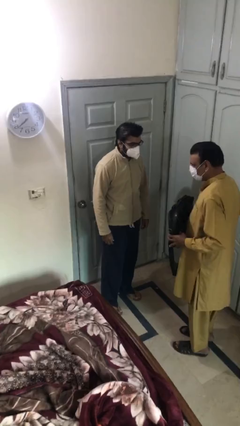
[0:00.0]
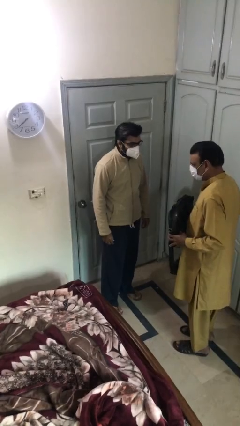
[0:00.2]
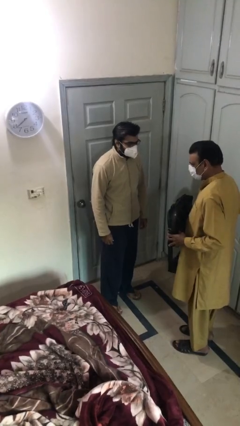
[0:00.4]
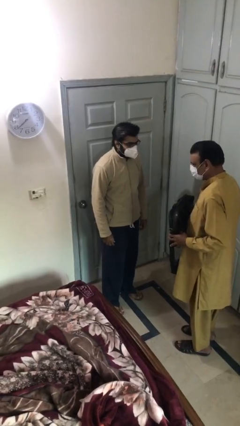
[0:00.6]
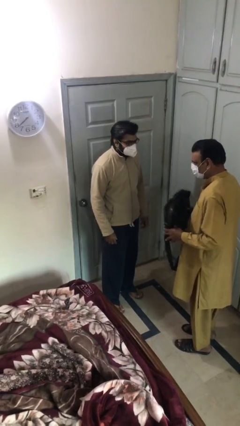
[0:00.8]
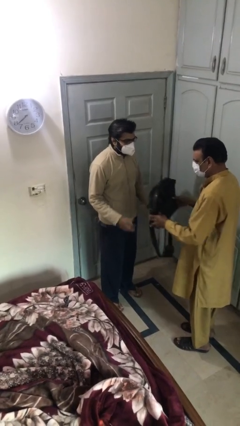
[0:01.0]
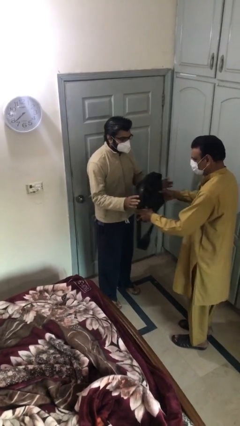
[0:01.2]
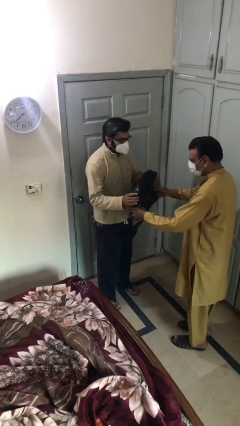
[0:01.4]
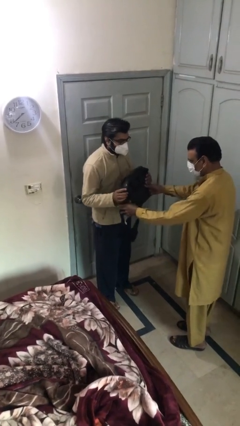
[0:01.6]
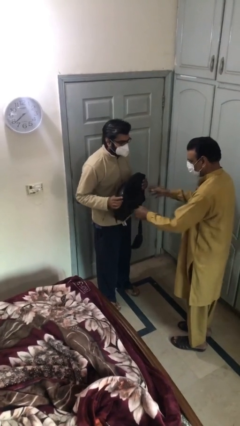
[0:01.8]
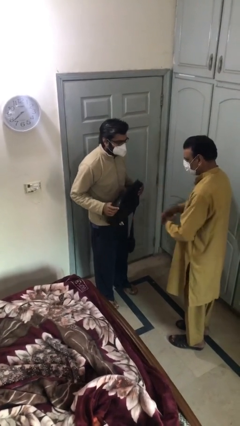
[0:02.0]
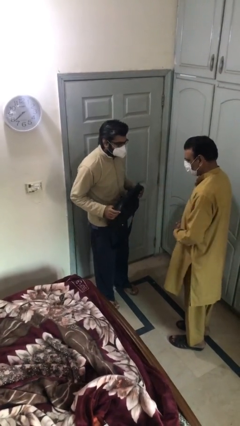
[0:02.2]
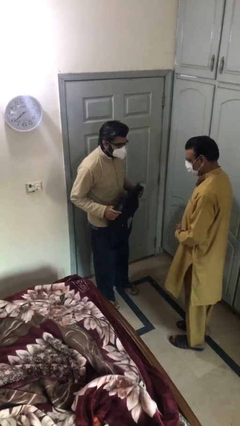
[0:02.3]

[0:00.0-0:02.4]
person transfers object to person

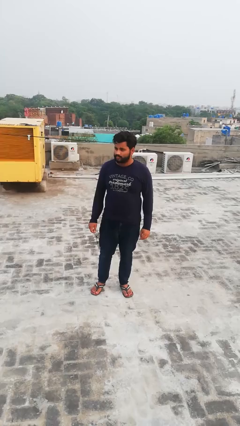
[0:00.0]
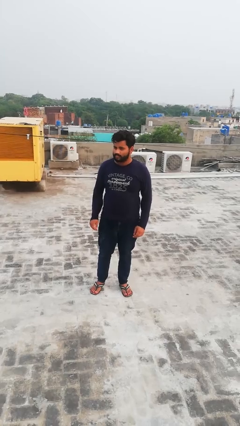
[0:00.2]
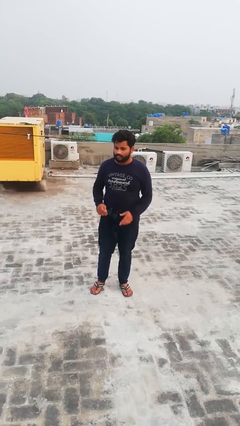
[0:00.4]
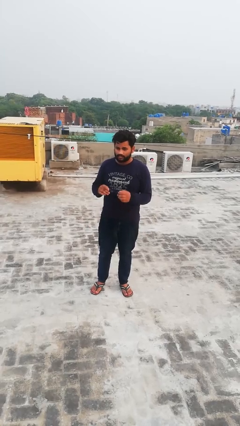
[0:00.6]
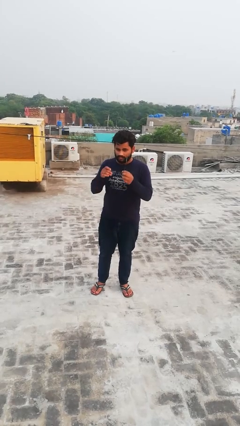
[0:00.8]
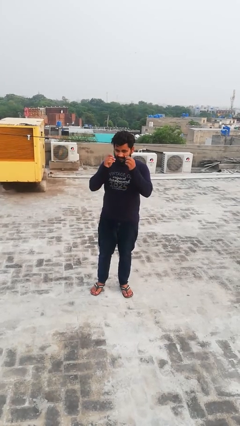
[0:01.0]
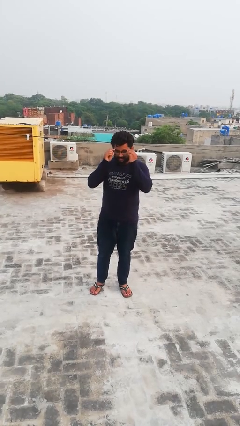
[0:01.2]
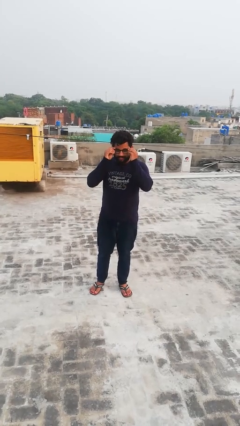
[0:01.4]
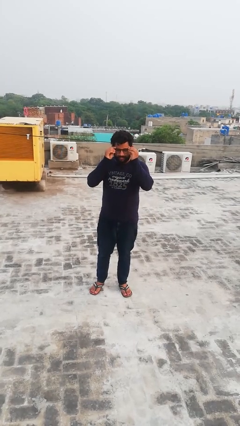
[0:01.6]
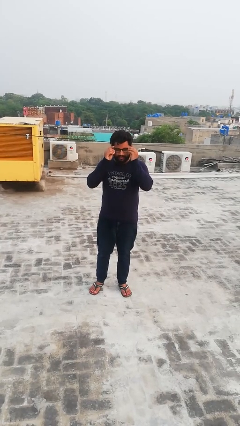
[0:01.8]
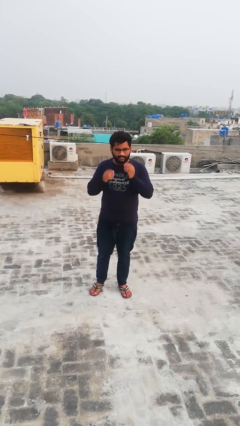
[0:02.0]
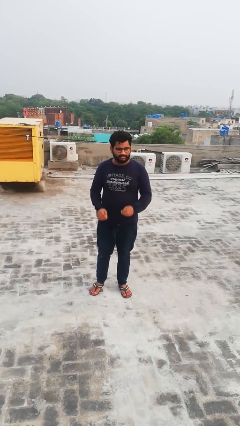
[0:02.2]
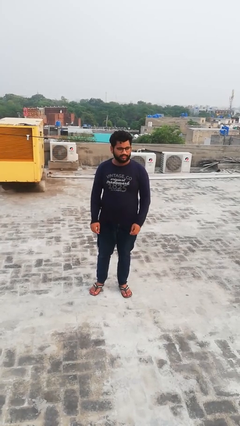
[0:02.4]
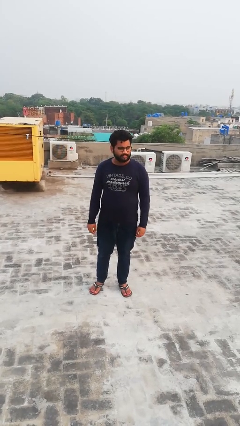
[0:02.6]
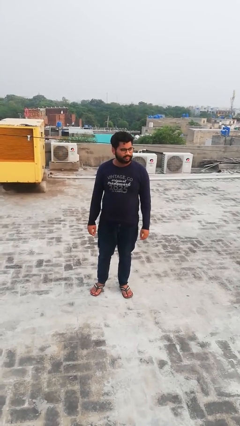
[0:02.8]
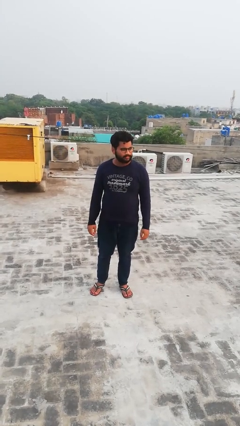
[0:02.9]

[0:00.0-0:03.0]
person puts on glasses

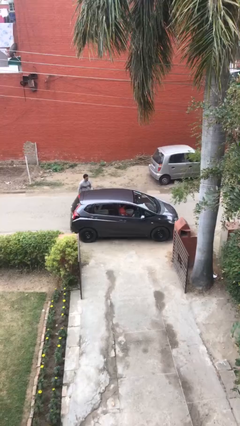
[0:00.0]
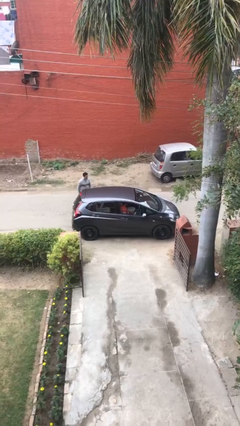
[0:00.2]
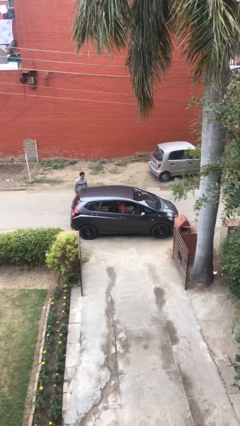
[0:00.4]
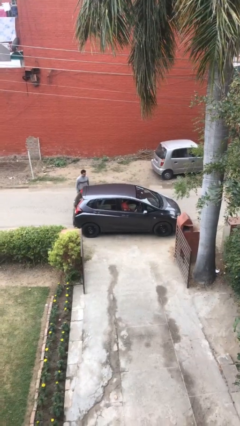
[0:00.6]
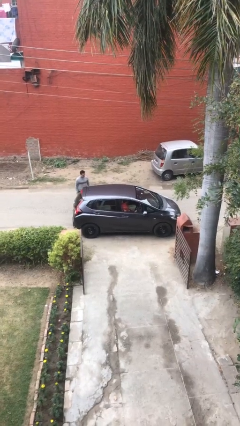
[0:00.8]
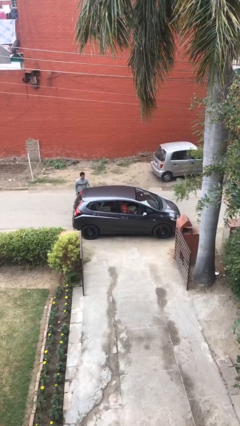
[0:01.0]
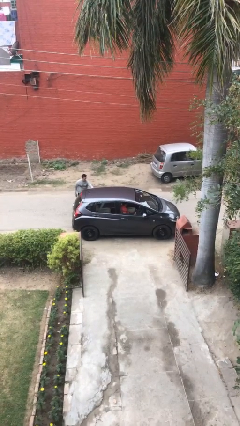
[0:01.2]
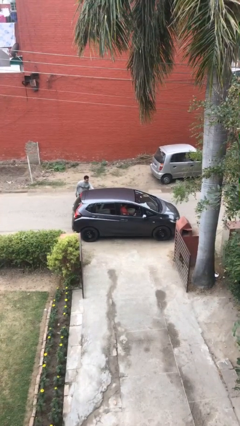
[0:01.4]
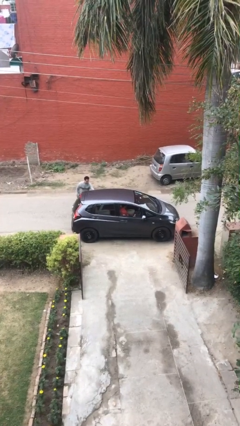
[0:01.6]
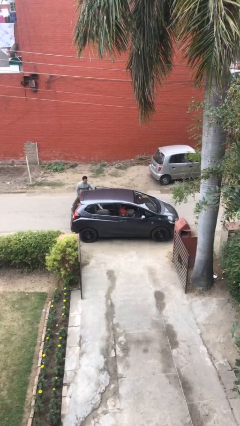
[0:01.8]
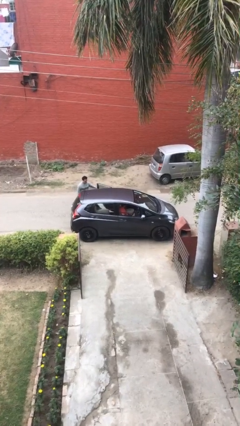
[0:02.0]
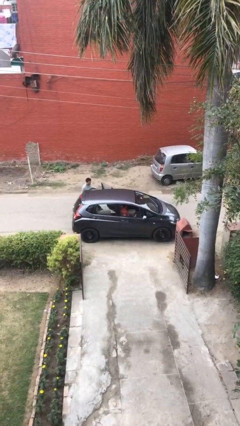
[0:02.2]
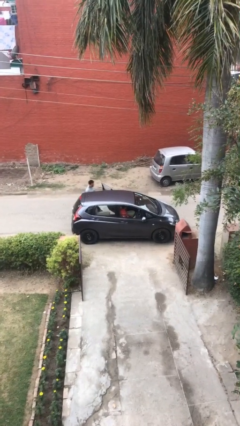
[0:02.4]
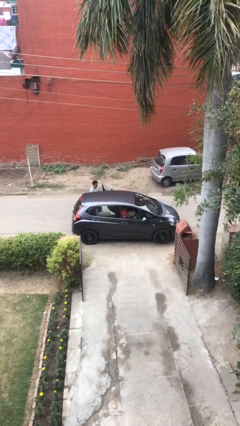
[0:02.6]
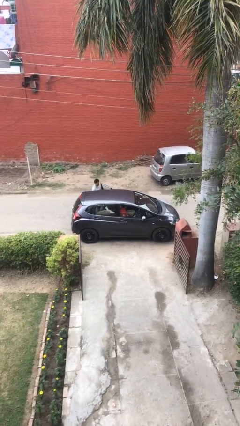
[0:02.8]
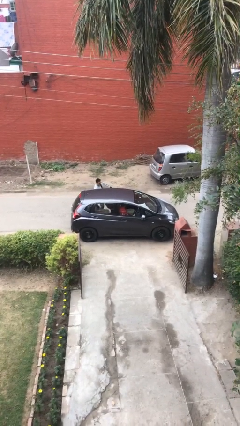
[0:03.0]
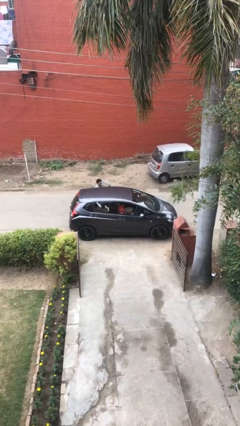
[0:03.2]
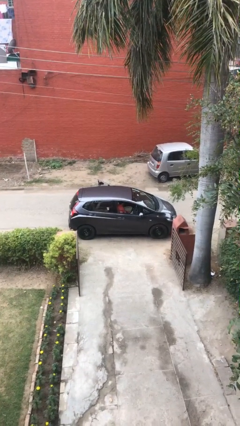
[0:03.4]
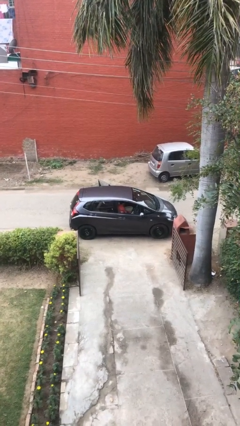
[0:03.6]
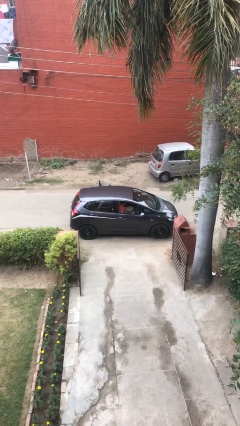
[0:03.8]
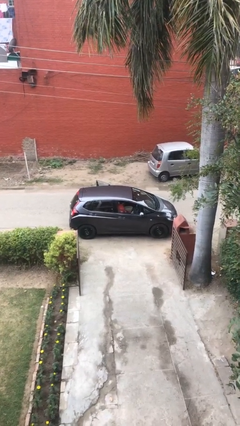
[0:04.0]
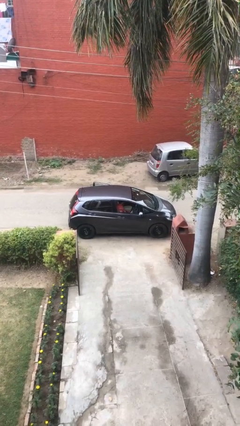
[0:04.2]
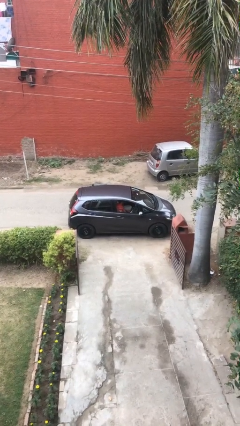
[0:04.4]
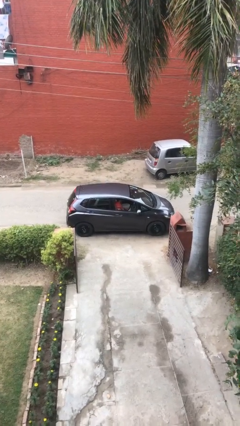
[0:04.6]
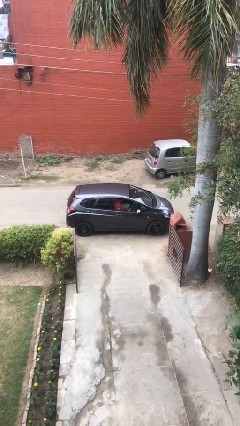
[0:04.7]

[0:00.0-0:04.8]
car picks up person

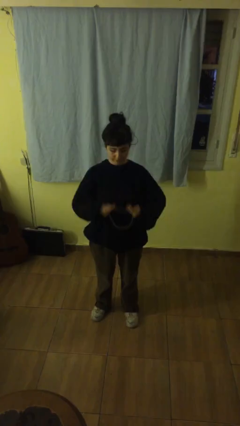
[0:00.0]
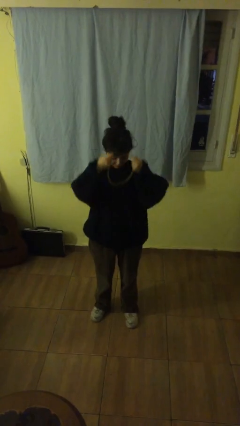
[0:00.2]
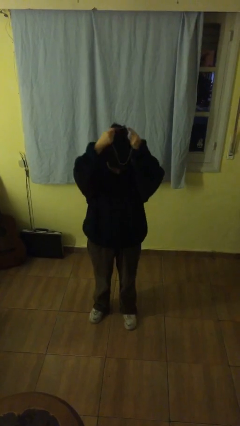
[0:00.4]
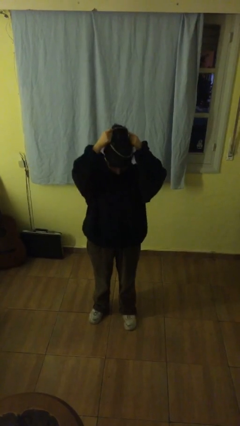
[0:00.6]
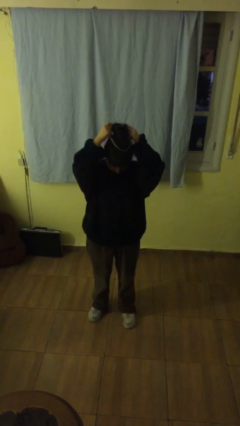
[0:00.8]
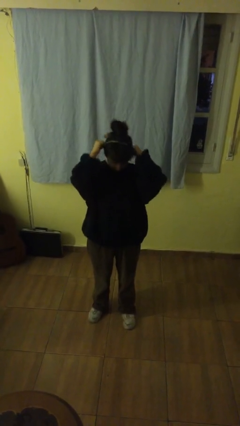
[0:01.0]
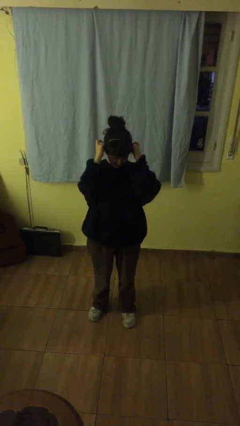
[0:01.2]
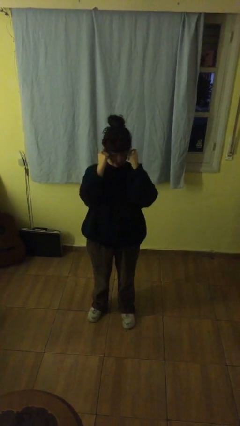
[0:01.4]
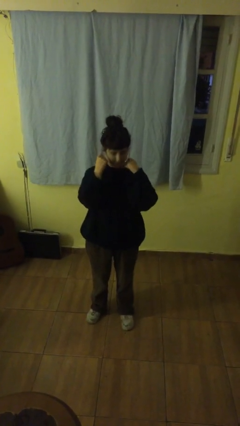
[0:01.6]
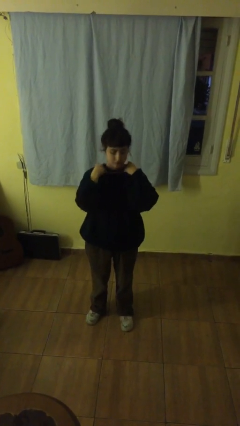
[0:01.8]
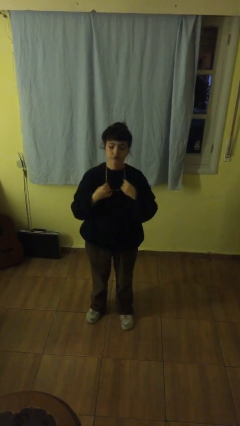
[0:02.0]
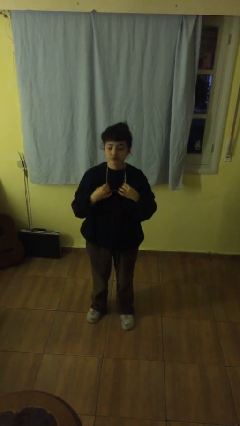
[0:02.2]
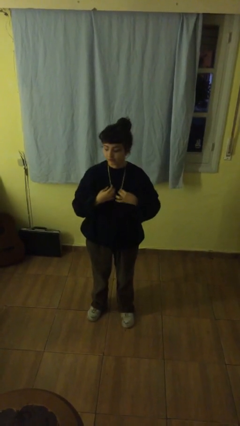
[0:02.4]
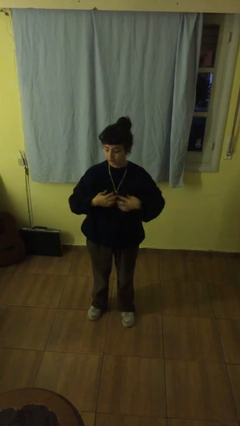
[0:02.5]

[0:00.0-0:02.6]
person puts on necklace

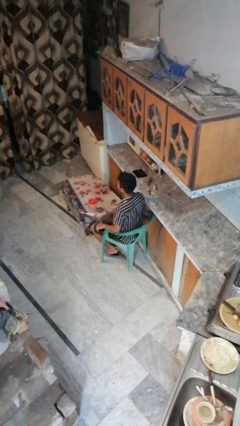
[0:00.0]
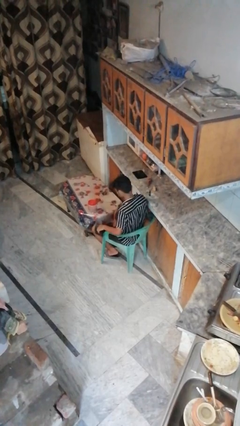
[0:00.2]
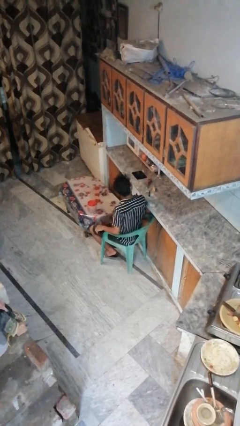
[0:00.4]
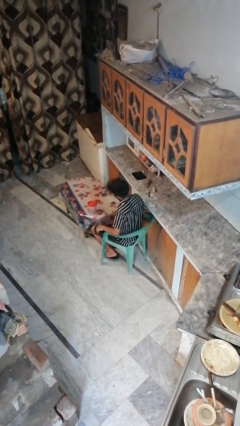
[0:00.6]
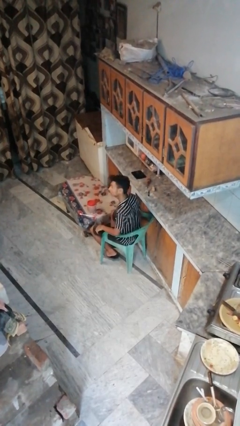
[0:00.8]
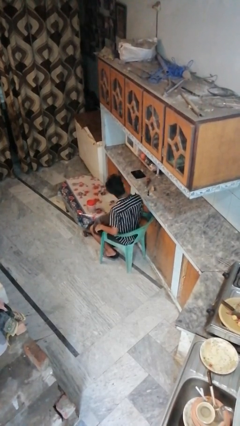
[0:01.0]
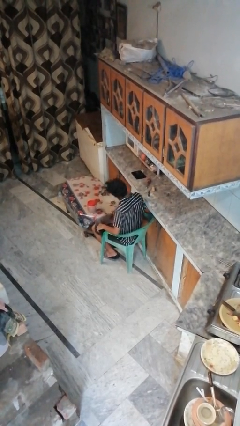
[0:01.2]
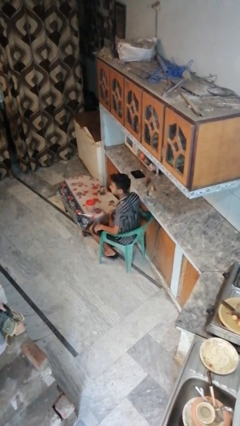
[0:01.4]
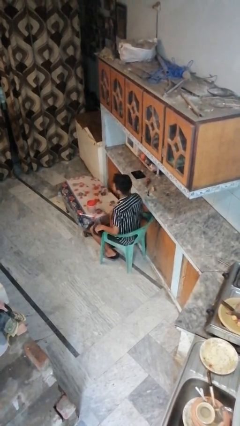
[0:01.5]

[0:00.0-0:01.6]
person shakes head

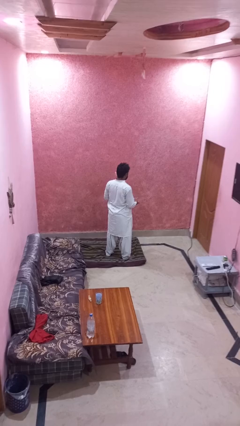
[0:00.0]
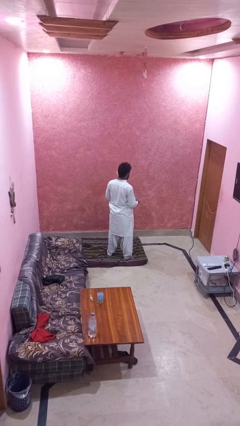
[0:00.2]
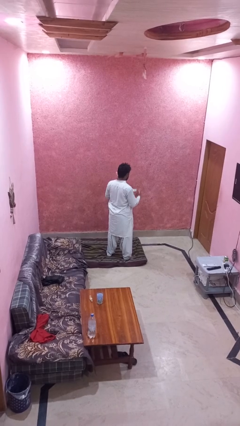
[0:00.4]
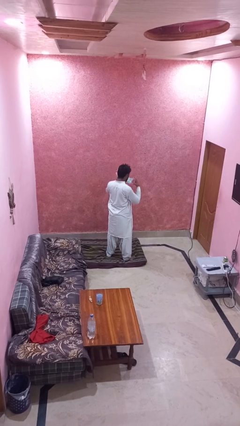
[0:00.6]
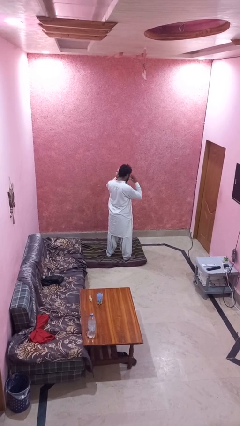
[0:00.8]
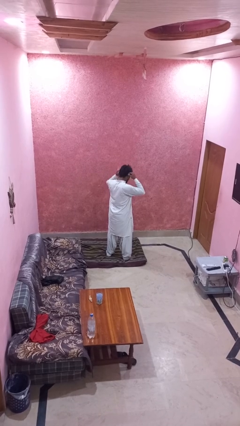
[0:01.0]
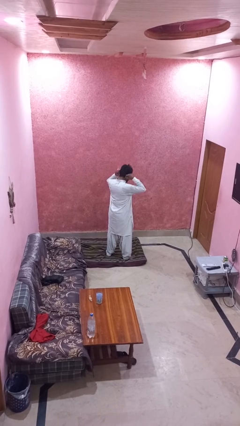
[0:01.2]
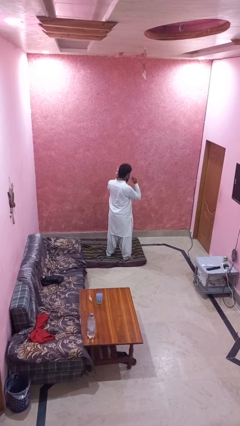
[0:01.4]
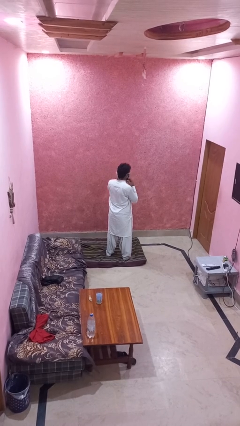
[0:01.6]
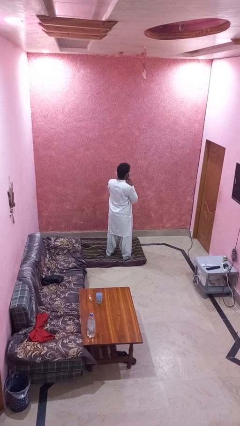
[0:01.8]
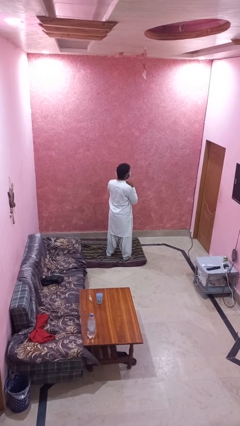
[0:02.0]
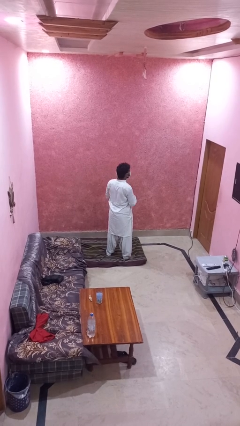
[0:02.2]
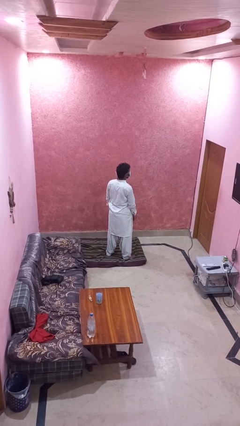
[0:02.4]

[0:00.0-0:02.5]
person puts on facemask
